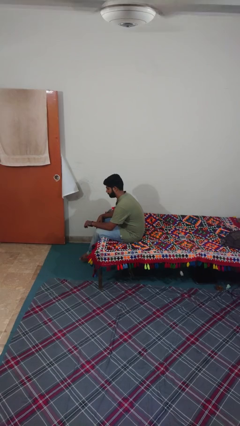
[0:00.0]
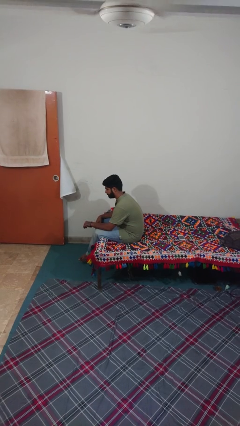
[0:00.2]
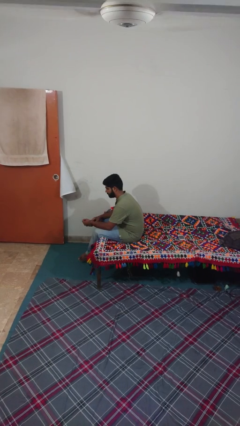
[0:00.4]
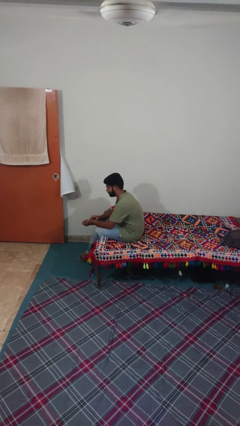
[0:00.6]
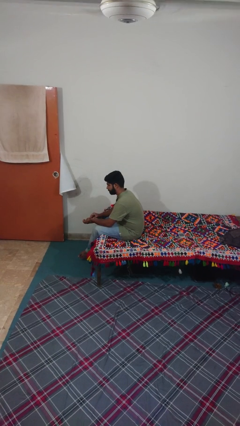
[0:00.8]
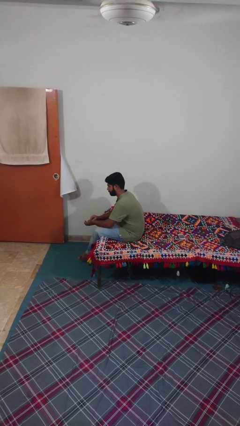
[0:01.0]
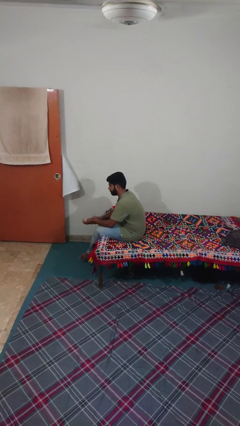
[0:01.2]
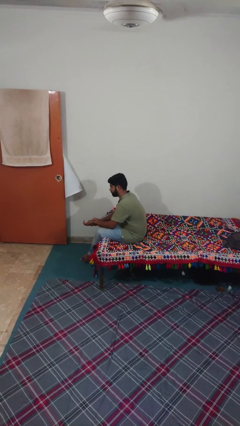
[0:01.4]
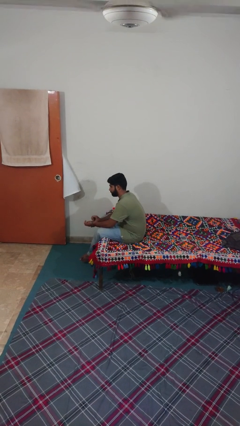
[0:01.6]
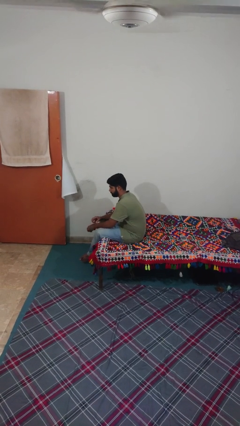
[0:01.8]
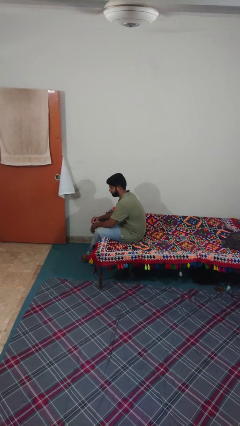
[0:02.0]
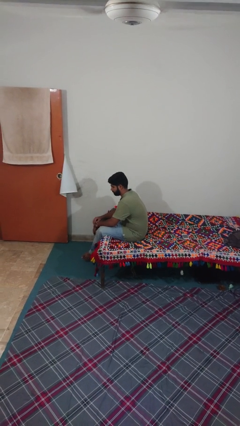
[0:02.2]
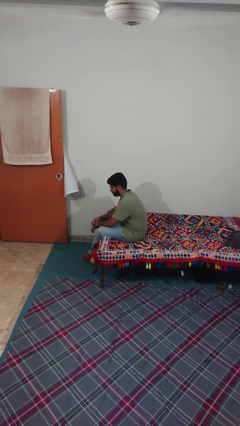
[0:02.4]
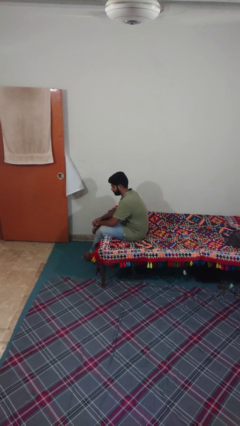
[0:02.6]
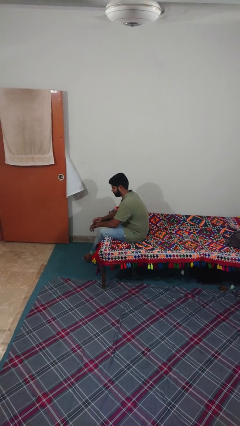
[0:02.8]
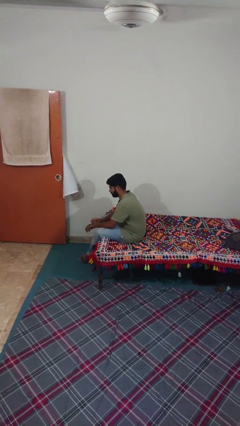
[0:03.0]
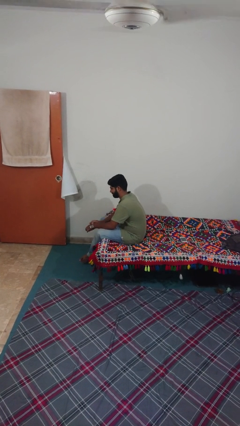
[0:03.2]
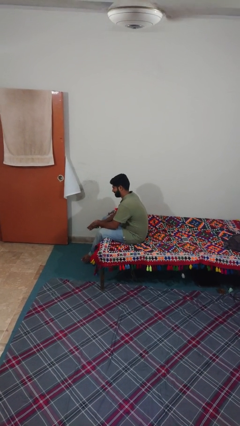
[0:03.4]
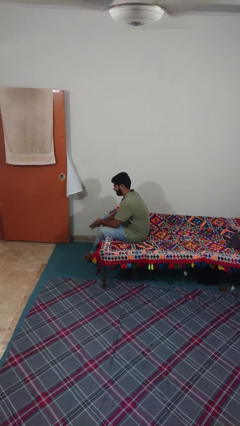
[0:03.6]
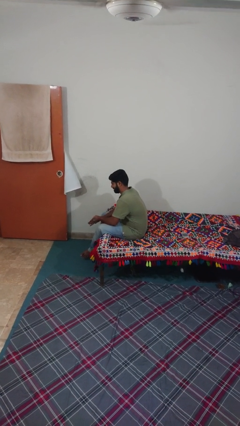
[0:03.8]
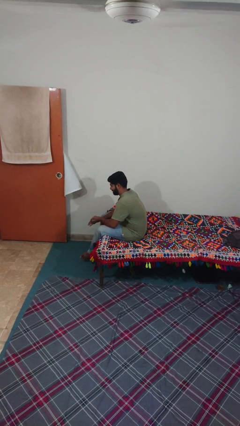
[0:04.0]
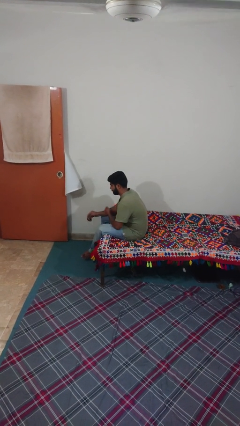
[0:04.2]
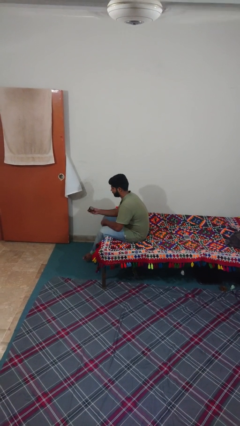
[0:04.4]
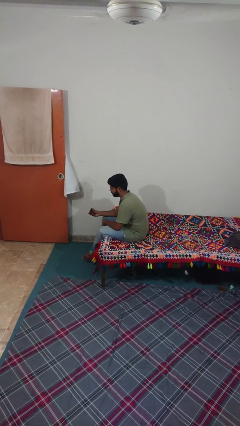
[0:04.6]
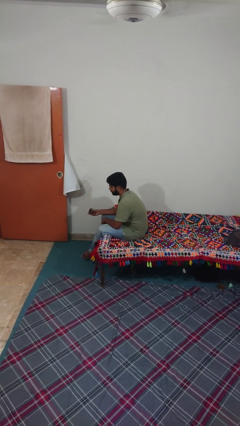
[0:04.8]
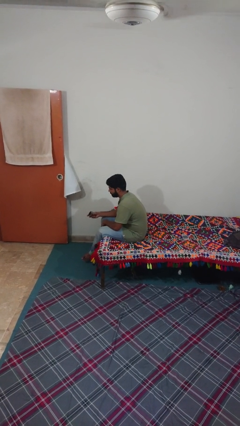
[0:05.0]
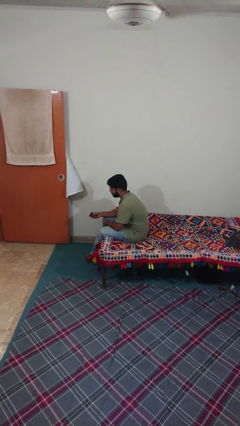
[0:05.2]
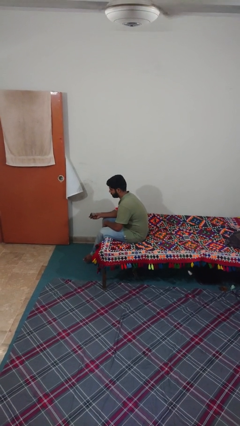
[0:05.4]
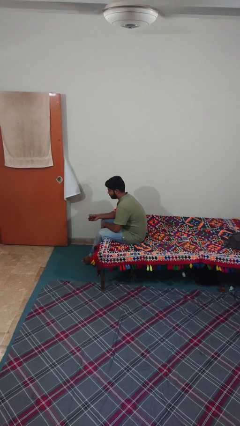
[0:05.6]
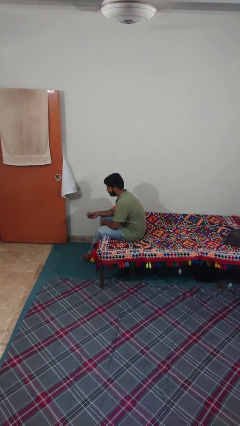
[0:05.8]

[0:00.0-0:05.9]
person takes off wristwatch

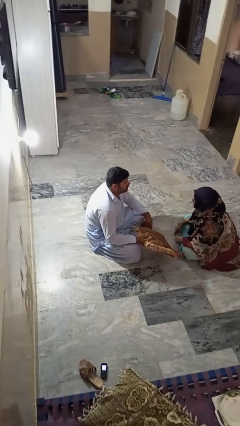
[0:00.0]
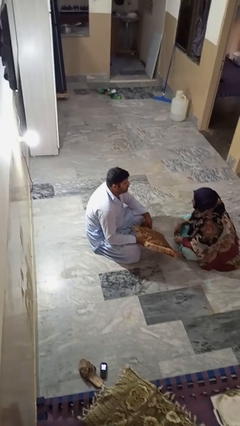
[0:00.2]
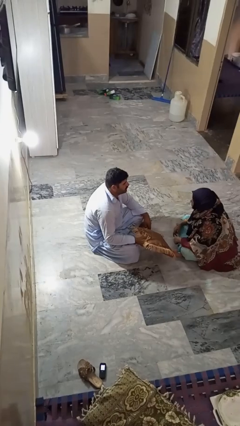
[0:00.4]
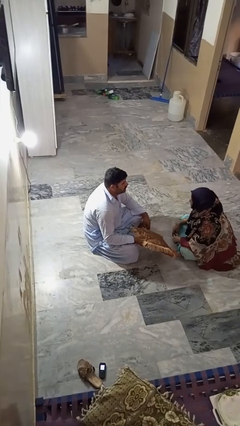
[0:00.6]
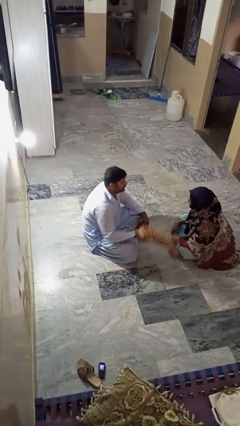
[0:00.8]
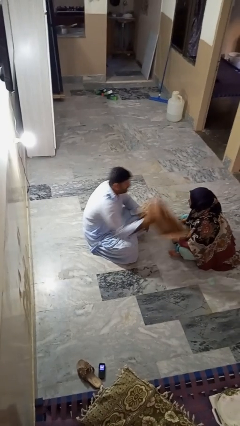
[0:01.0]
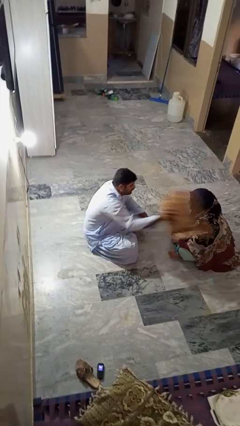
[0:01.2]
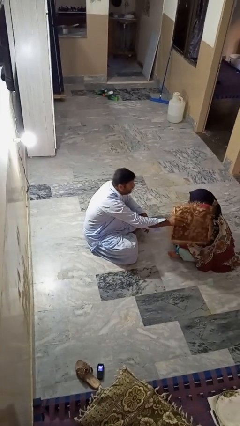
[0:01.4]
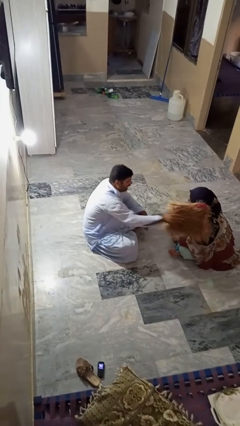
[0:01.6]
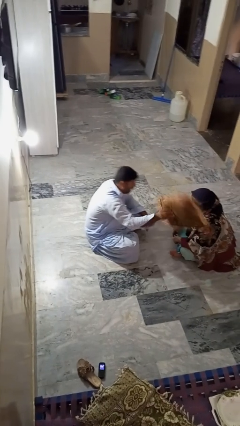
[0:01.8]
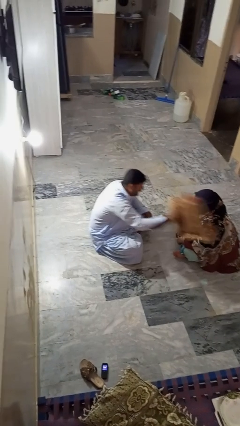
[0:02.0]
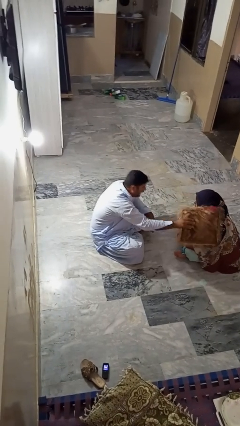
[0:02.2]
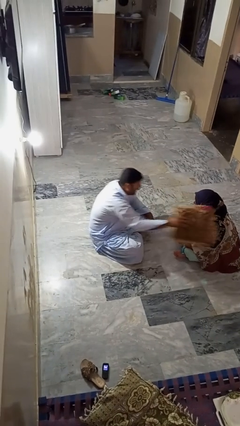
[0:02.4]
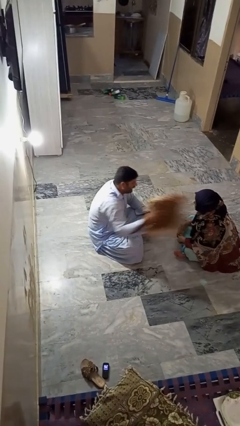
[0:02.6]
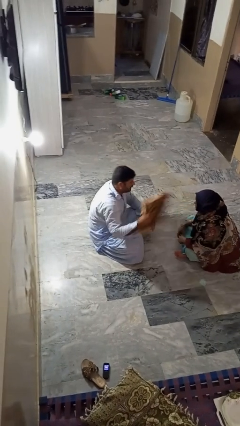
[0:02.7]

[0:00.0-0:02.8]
person hits person with pillow

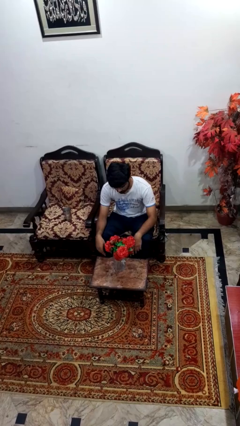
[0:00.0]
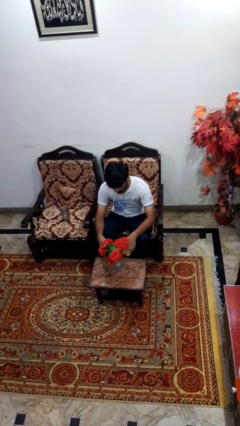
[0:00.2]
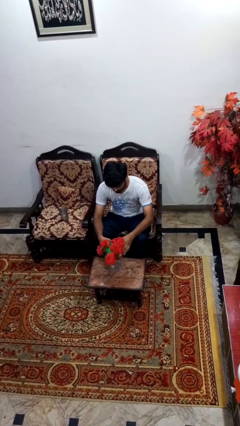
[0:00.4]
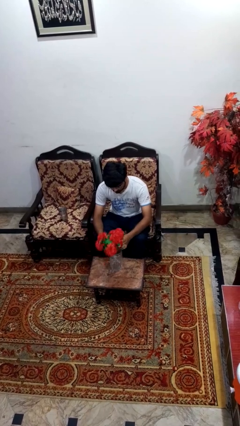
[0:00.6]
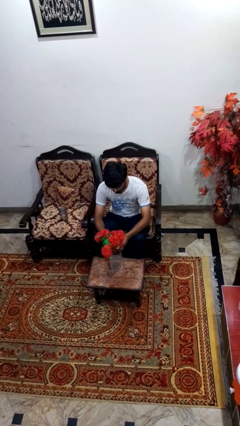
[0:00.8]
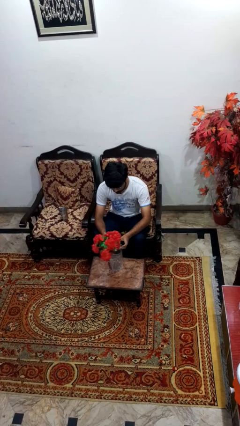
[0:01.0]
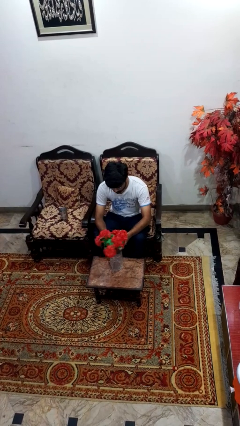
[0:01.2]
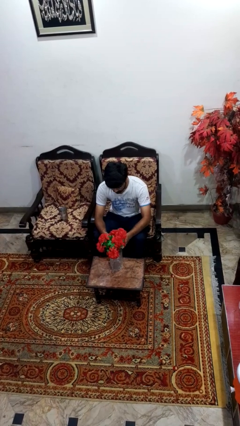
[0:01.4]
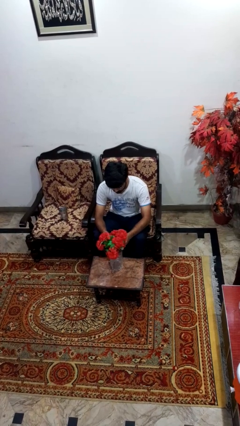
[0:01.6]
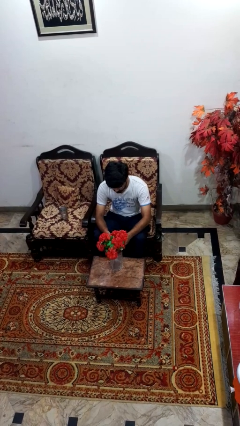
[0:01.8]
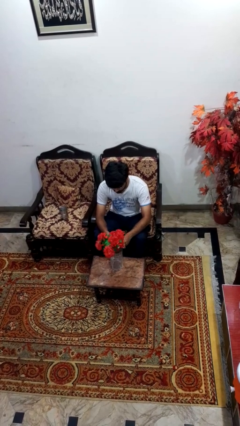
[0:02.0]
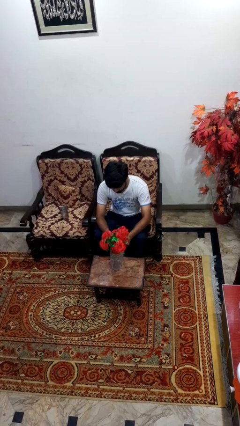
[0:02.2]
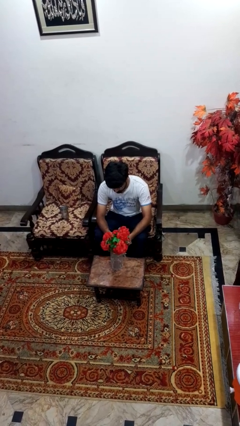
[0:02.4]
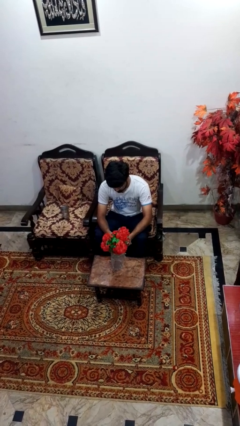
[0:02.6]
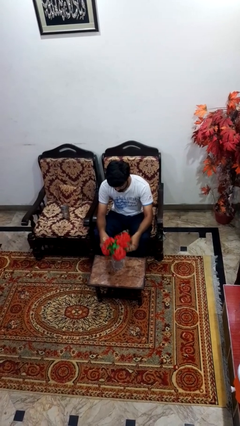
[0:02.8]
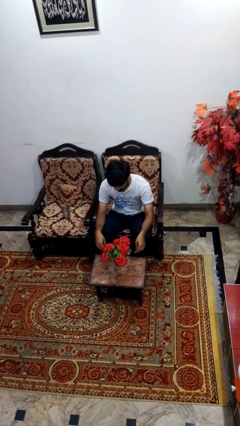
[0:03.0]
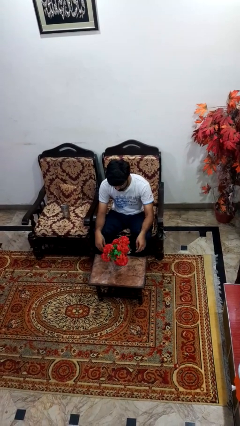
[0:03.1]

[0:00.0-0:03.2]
person arranges flowers in vase

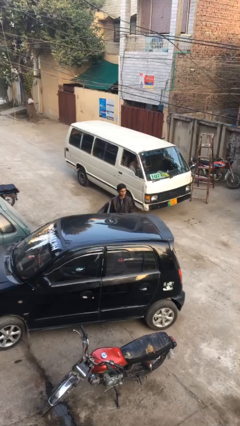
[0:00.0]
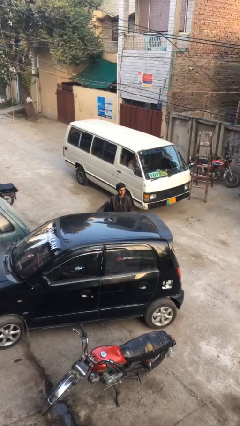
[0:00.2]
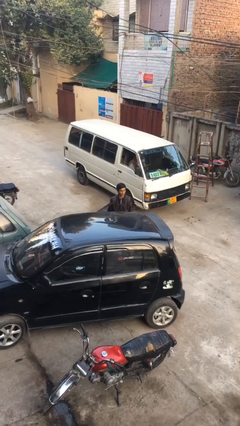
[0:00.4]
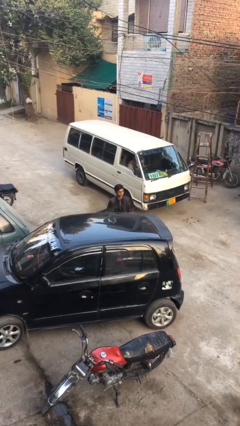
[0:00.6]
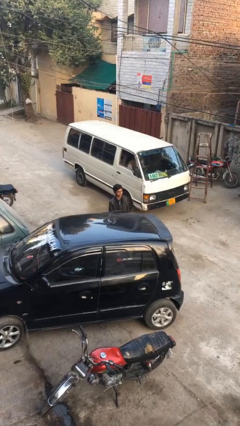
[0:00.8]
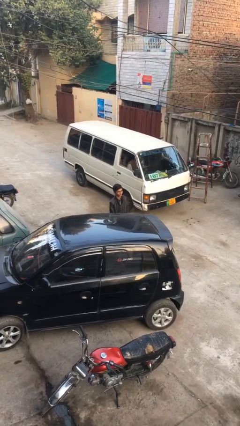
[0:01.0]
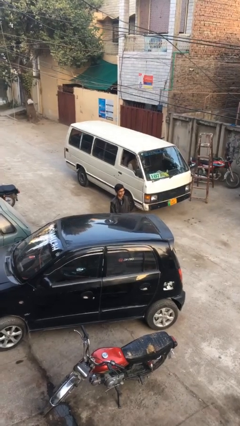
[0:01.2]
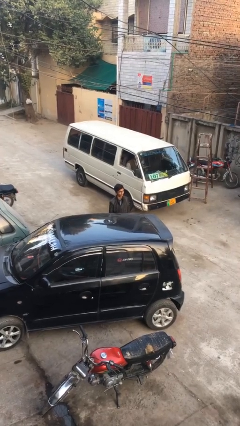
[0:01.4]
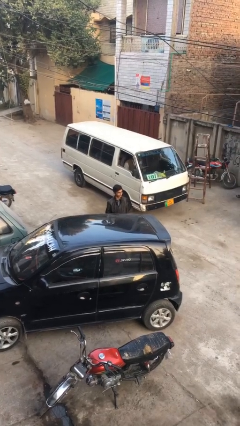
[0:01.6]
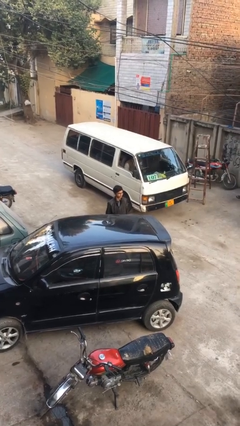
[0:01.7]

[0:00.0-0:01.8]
person closes car door

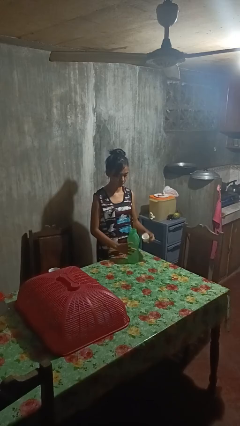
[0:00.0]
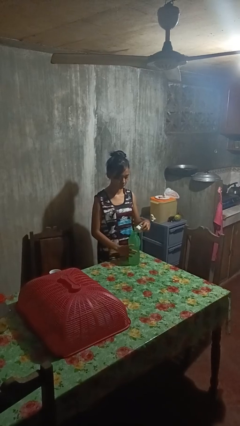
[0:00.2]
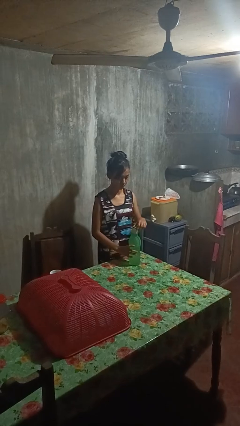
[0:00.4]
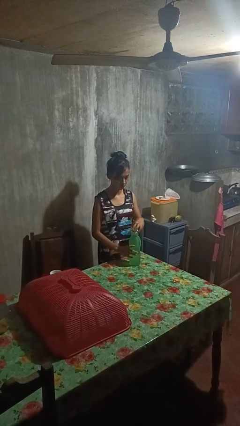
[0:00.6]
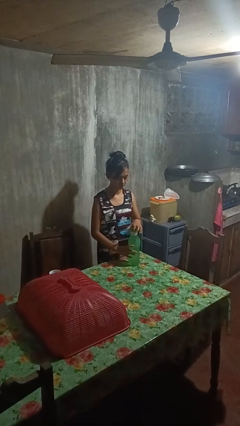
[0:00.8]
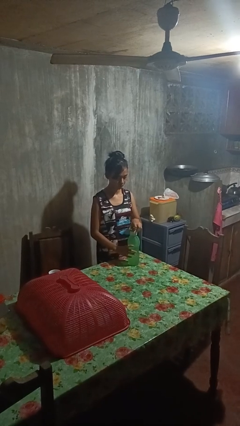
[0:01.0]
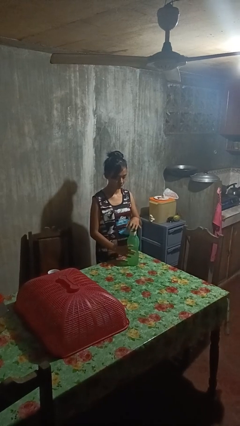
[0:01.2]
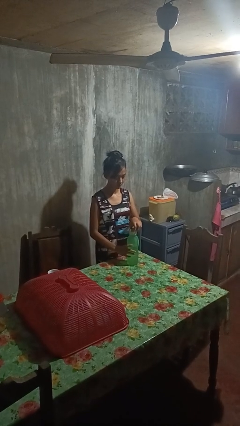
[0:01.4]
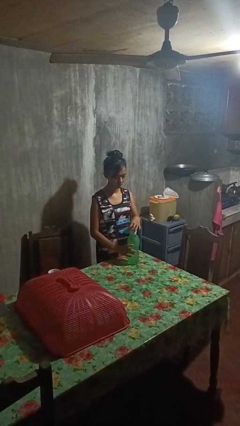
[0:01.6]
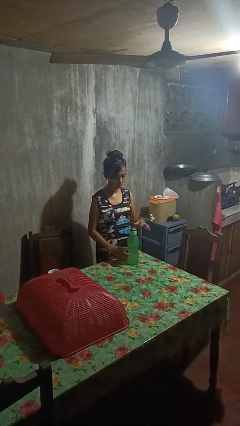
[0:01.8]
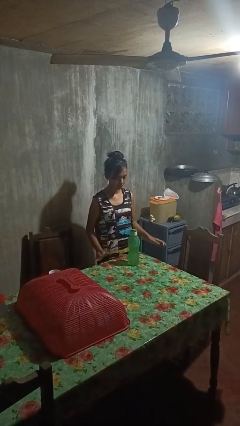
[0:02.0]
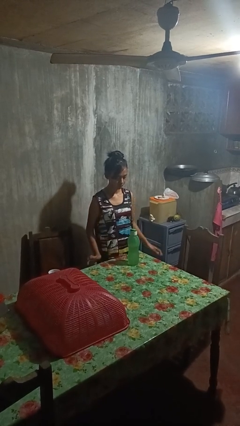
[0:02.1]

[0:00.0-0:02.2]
person screws lid to bottle

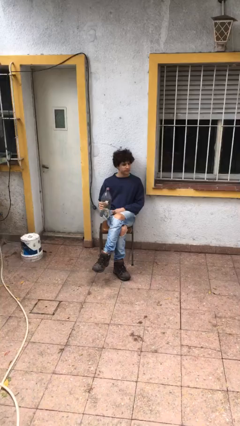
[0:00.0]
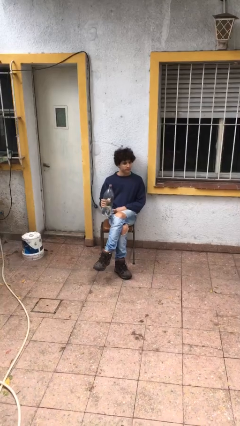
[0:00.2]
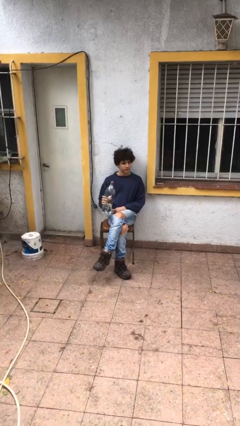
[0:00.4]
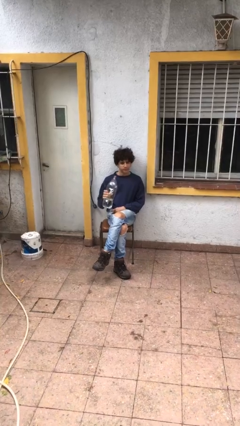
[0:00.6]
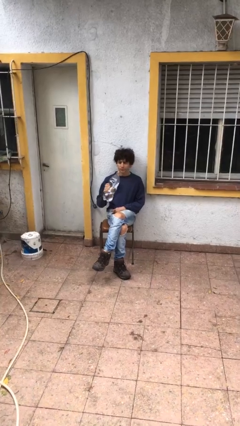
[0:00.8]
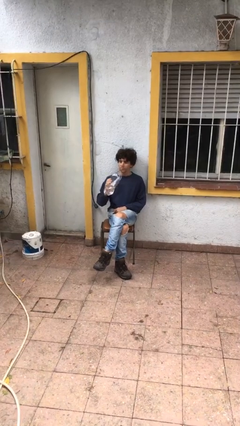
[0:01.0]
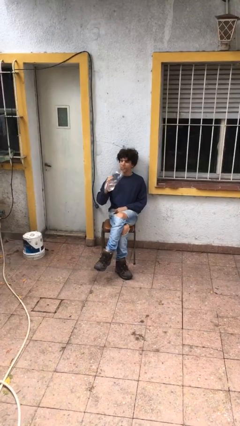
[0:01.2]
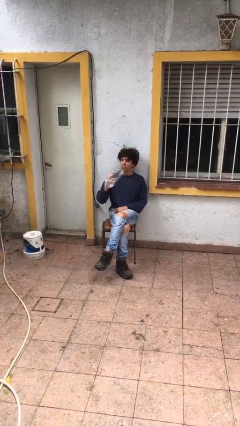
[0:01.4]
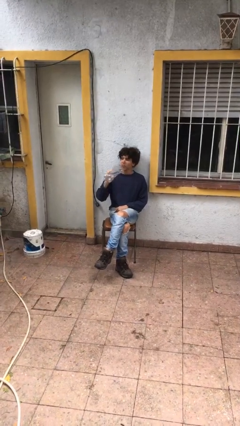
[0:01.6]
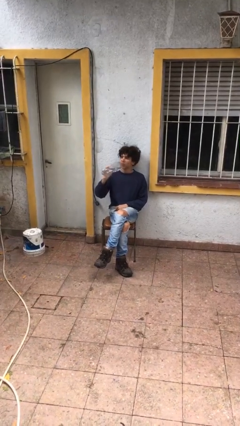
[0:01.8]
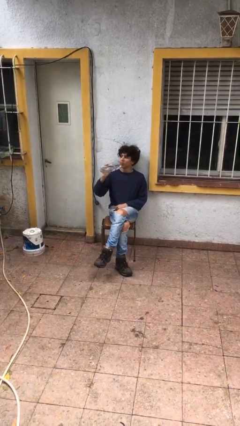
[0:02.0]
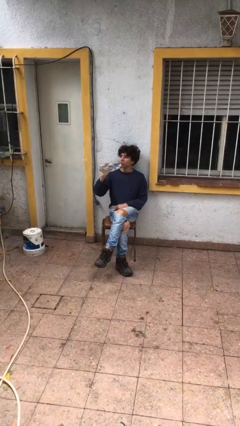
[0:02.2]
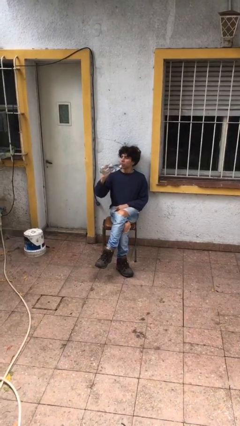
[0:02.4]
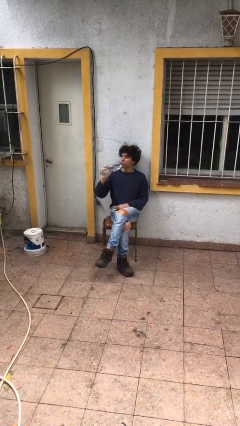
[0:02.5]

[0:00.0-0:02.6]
person drinks from bottle
